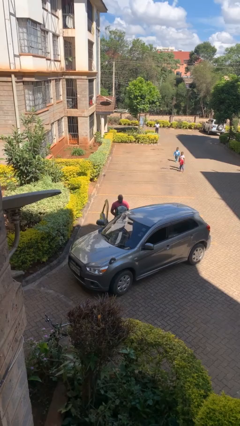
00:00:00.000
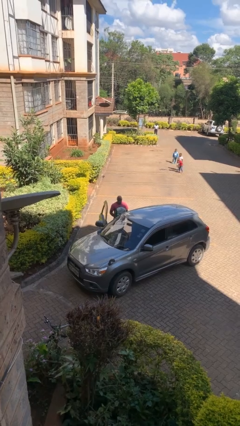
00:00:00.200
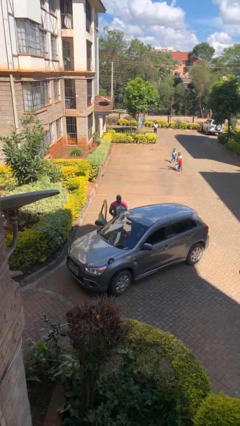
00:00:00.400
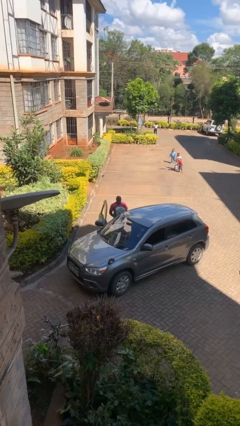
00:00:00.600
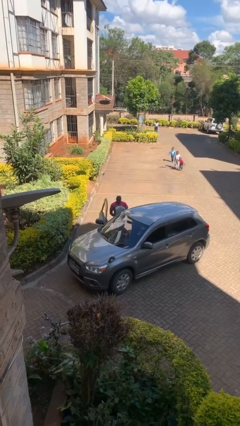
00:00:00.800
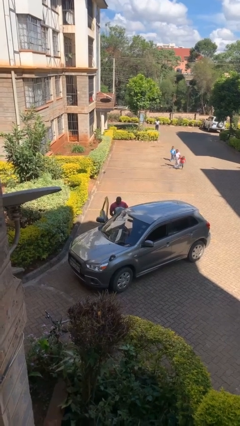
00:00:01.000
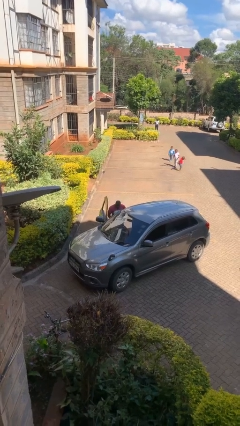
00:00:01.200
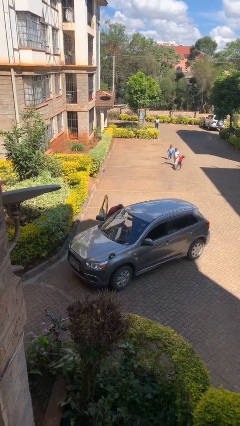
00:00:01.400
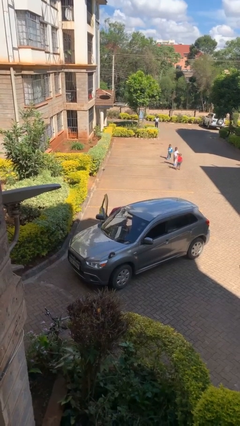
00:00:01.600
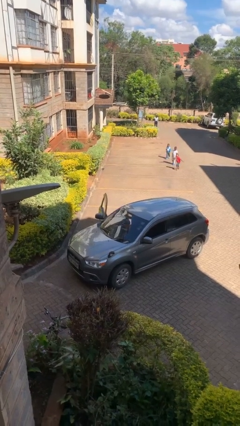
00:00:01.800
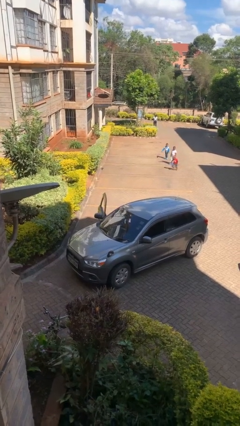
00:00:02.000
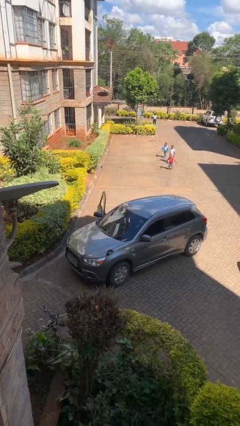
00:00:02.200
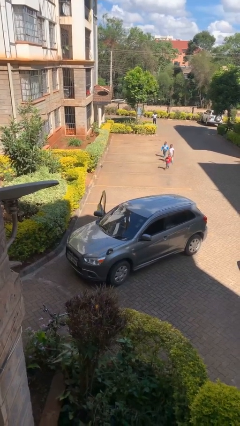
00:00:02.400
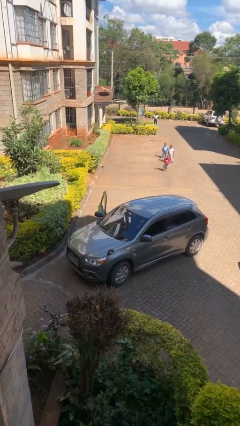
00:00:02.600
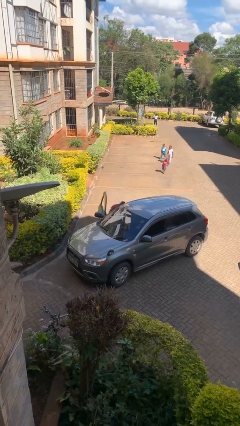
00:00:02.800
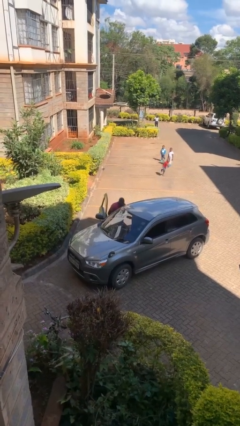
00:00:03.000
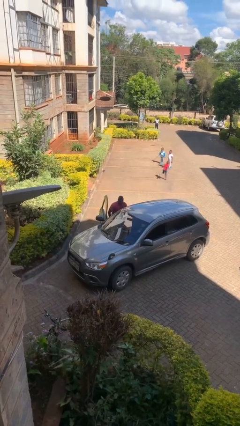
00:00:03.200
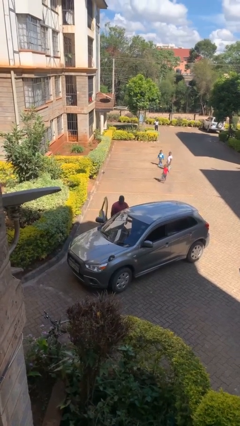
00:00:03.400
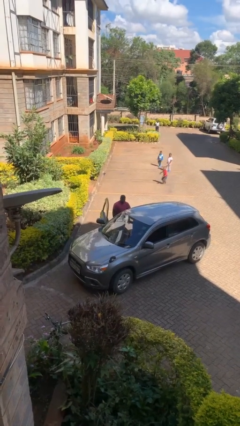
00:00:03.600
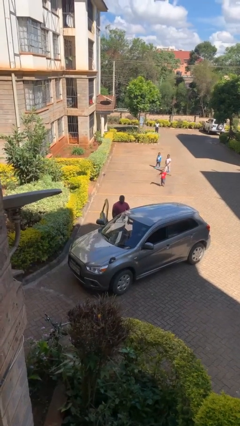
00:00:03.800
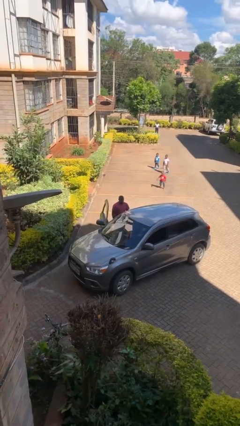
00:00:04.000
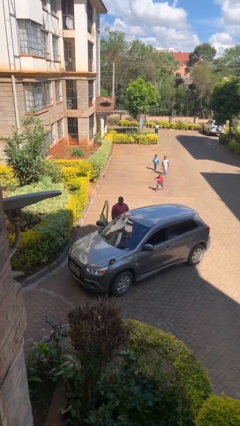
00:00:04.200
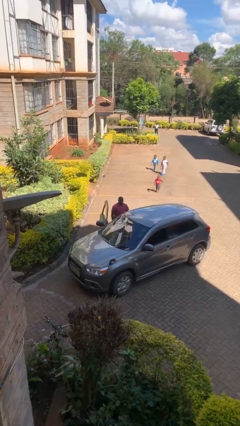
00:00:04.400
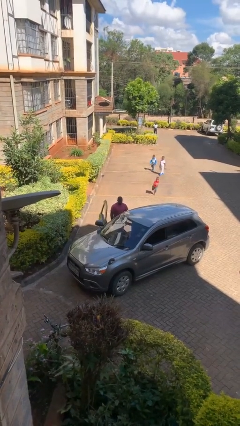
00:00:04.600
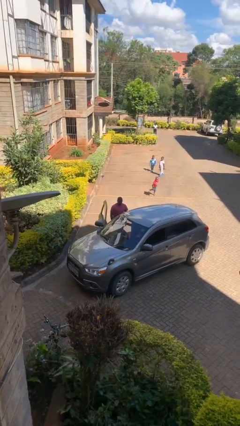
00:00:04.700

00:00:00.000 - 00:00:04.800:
person loads car

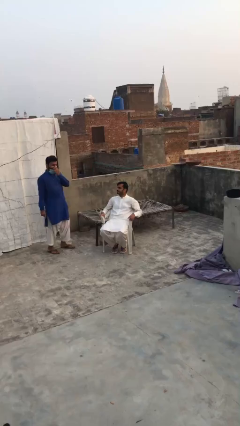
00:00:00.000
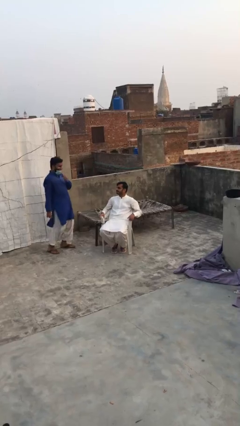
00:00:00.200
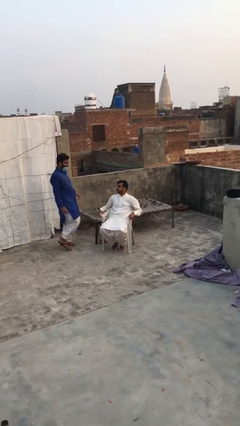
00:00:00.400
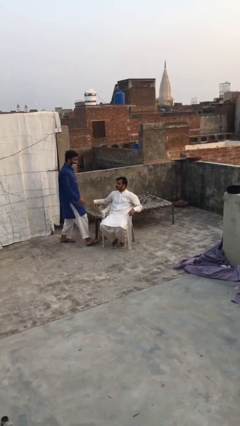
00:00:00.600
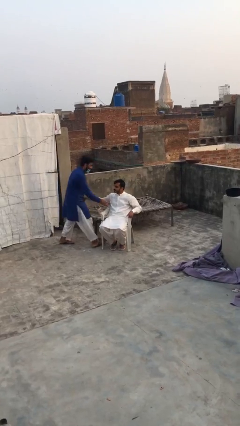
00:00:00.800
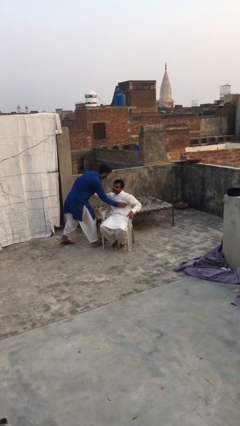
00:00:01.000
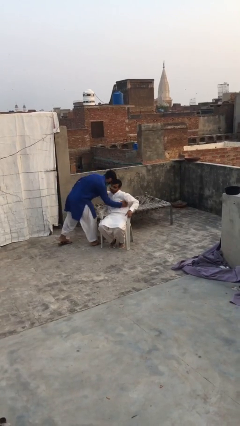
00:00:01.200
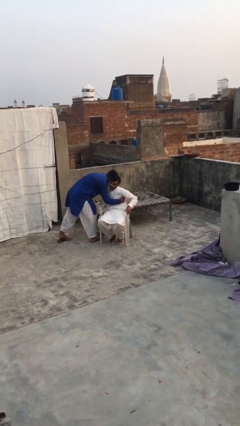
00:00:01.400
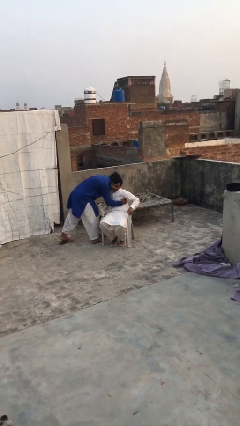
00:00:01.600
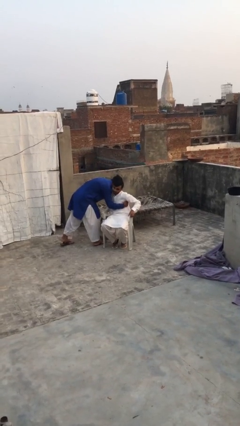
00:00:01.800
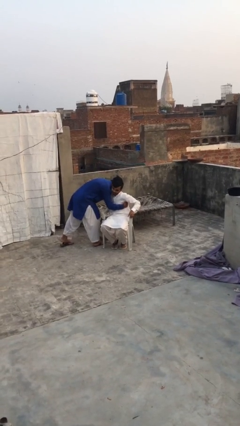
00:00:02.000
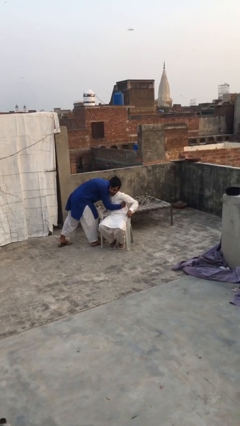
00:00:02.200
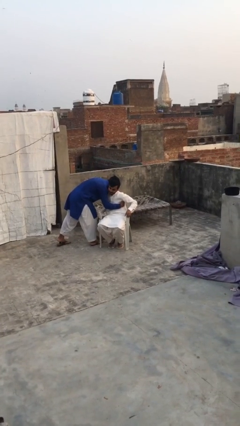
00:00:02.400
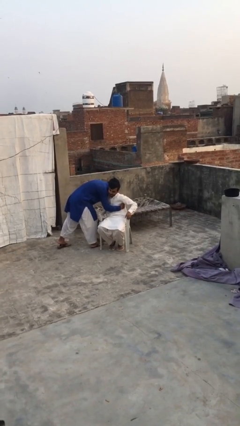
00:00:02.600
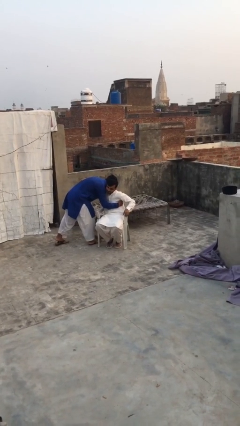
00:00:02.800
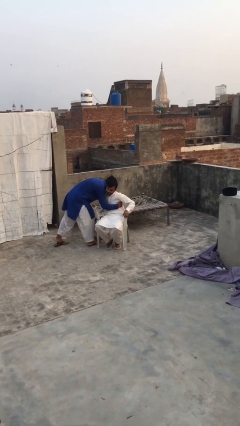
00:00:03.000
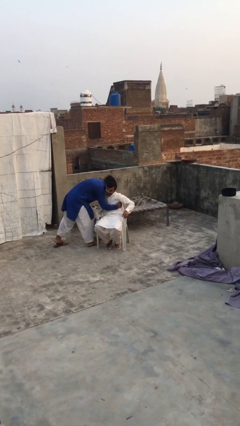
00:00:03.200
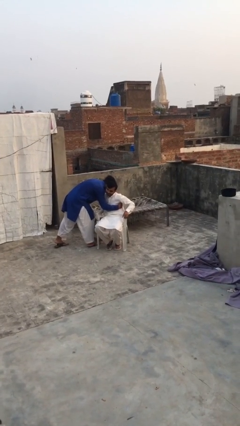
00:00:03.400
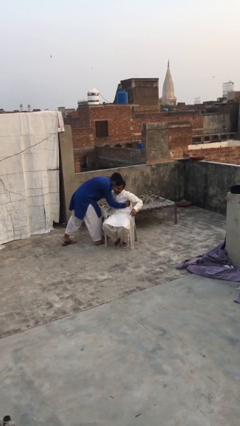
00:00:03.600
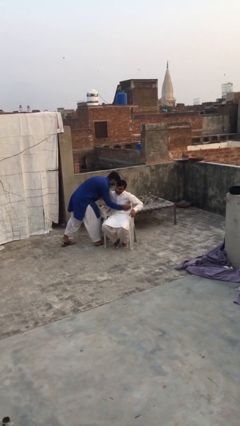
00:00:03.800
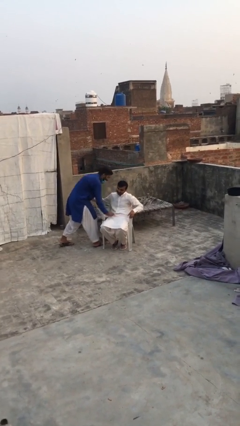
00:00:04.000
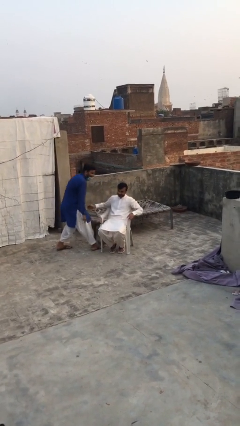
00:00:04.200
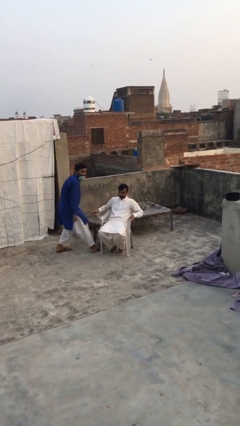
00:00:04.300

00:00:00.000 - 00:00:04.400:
person embraces person

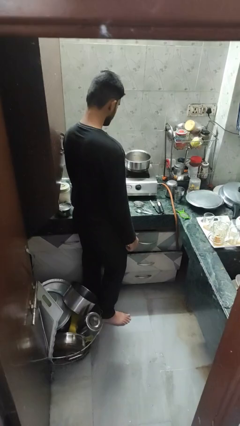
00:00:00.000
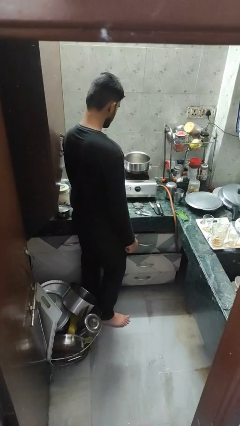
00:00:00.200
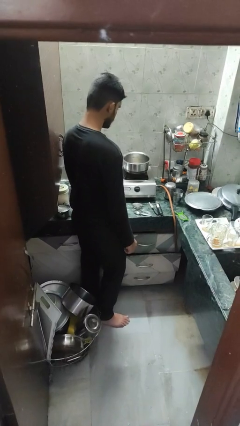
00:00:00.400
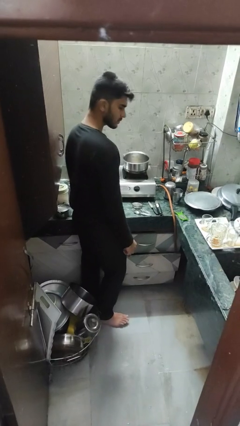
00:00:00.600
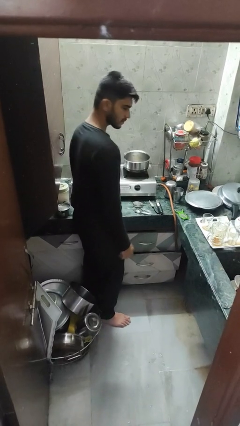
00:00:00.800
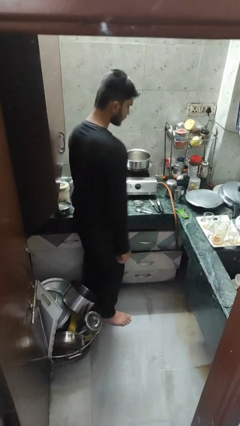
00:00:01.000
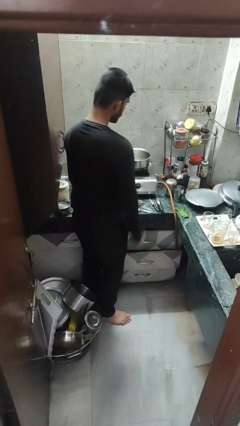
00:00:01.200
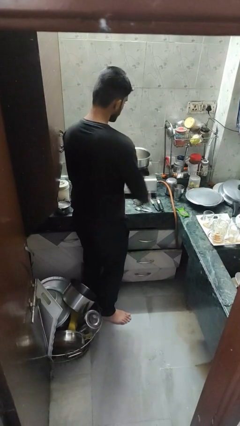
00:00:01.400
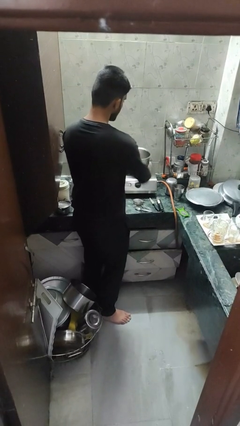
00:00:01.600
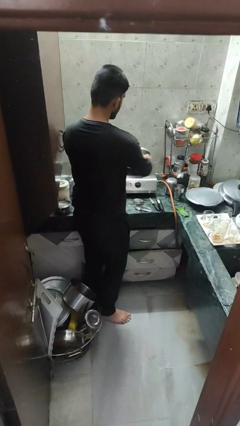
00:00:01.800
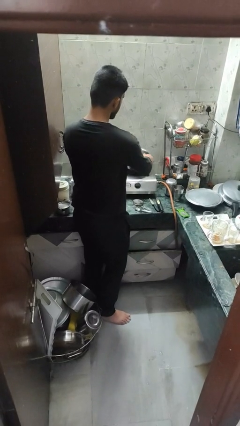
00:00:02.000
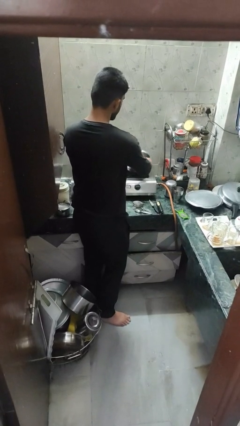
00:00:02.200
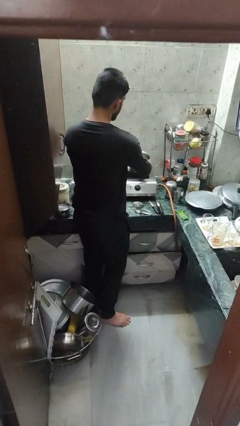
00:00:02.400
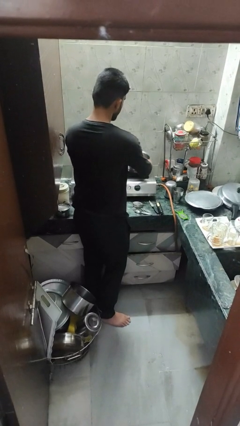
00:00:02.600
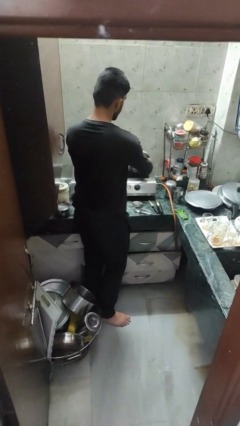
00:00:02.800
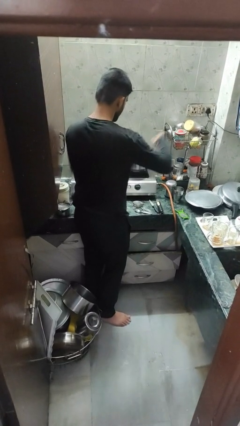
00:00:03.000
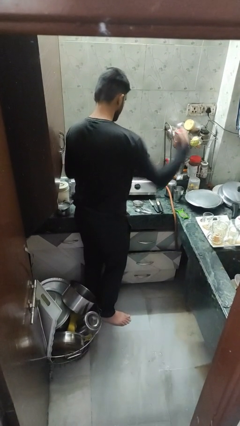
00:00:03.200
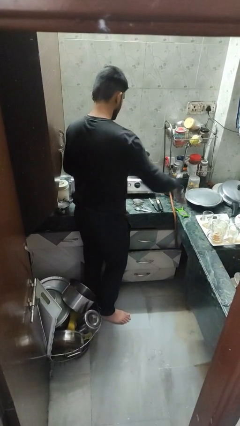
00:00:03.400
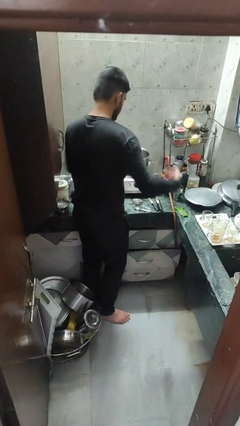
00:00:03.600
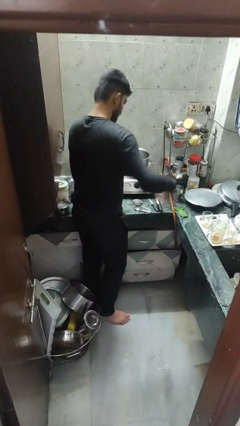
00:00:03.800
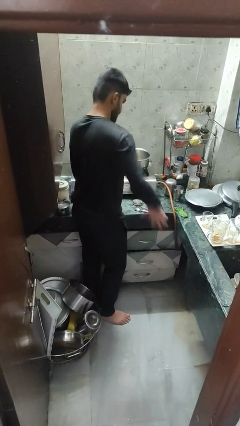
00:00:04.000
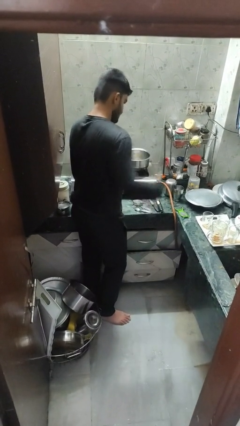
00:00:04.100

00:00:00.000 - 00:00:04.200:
person burns hand

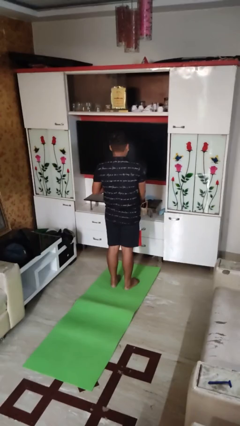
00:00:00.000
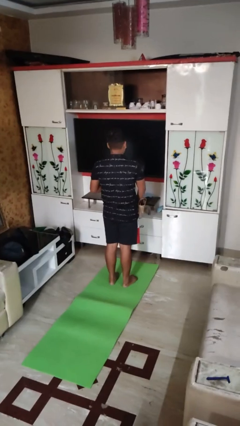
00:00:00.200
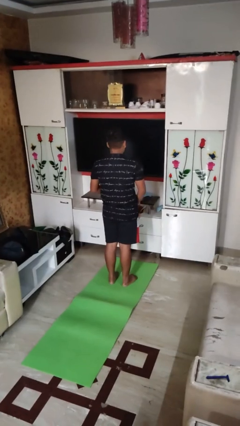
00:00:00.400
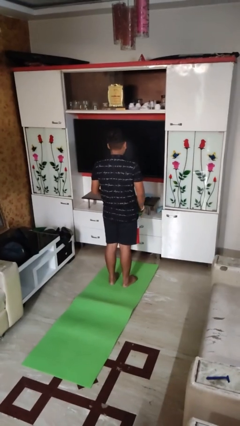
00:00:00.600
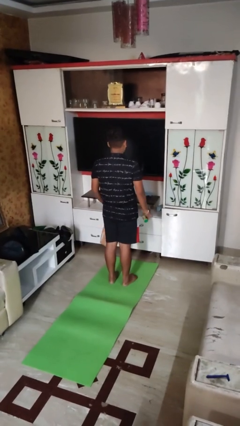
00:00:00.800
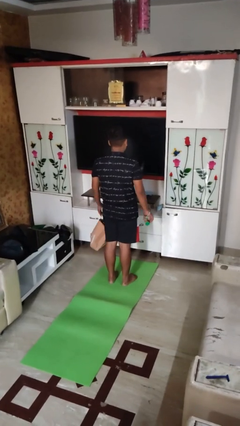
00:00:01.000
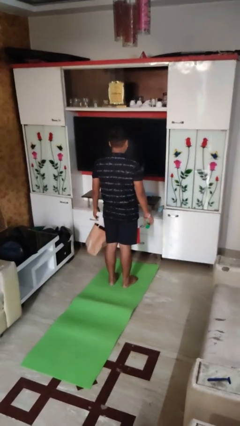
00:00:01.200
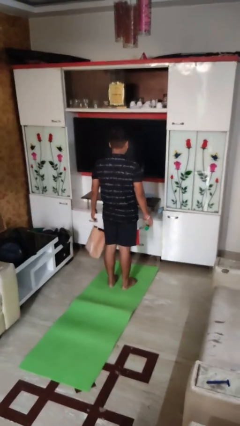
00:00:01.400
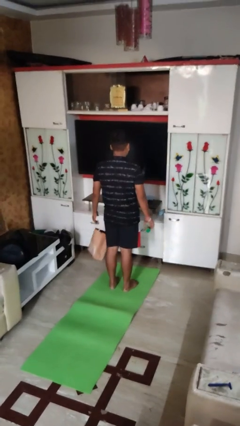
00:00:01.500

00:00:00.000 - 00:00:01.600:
person takes object from bag

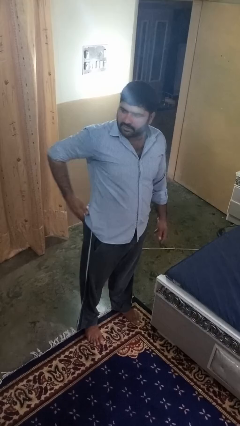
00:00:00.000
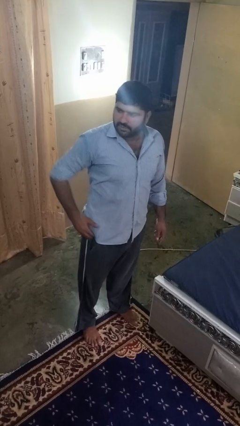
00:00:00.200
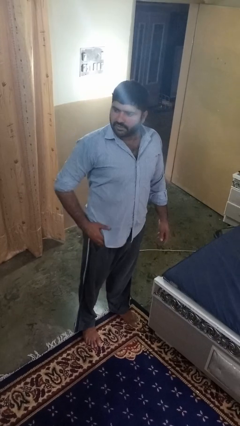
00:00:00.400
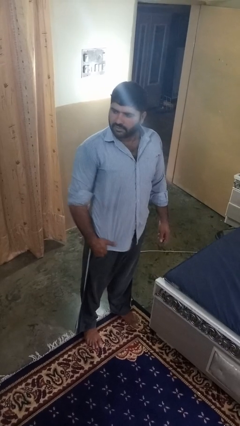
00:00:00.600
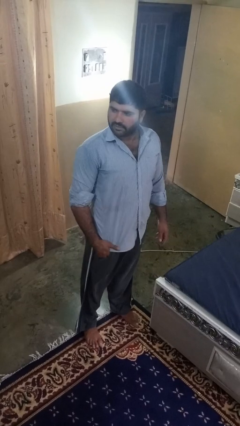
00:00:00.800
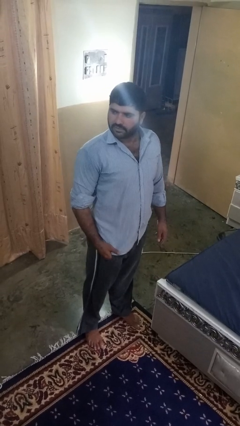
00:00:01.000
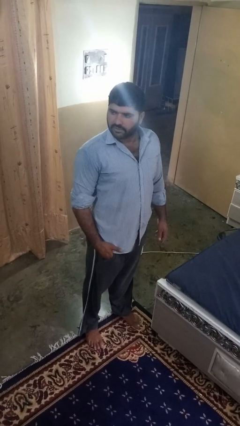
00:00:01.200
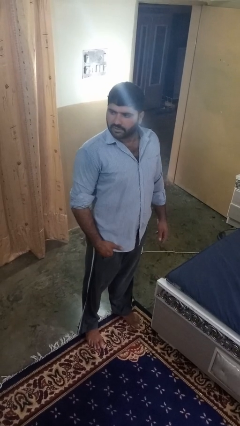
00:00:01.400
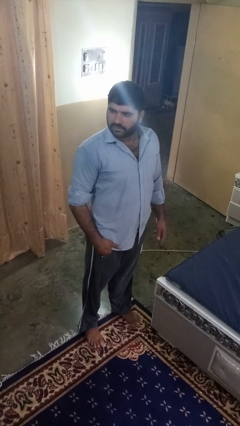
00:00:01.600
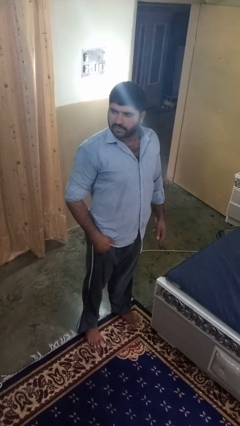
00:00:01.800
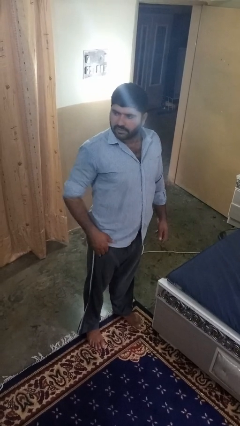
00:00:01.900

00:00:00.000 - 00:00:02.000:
person puts hands in back pockets

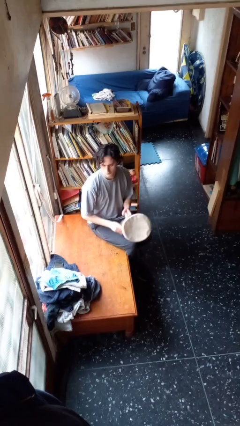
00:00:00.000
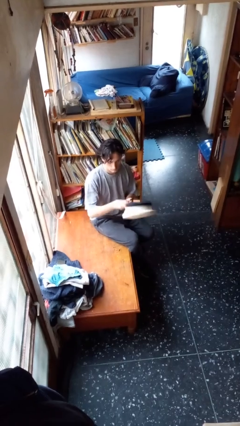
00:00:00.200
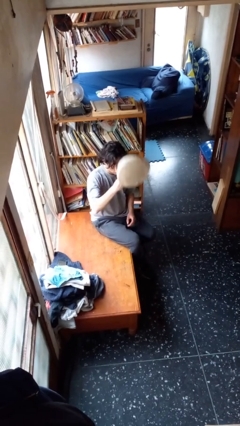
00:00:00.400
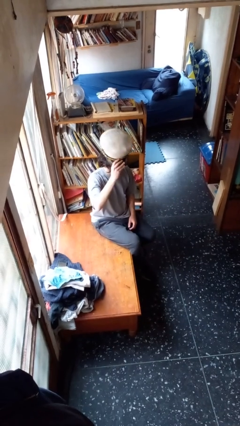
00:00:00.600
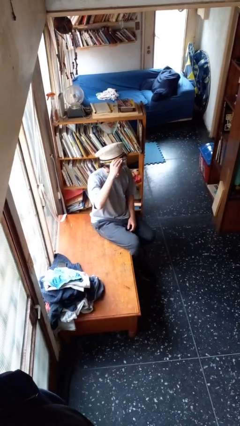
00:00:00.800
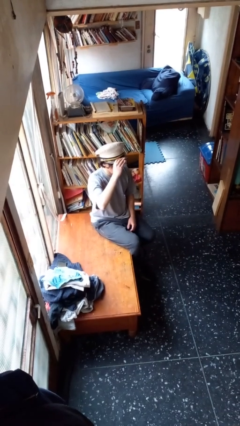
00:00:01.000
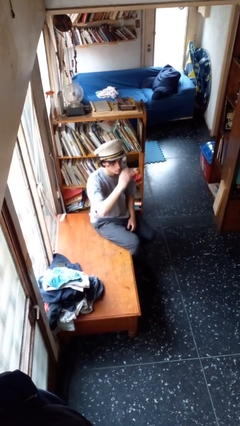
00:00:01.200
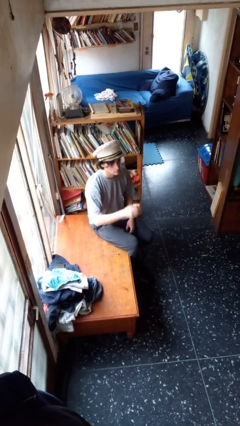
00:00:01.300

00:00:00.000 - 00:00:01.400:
person puts on hat
